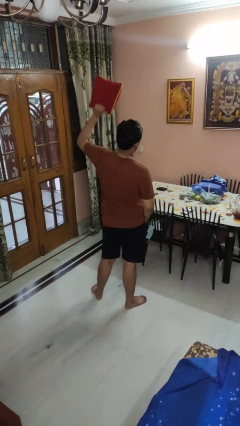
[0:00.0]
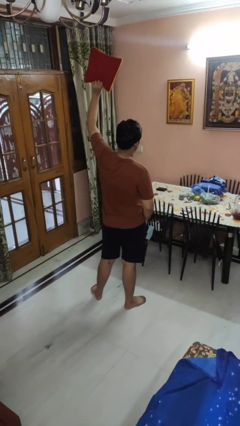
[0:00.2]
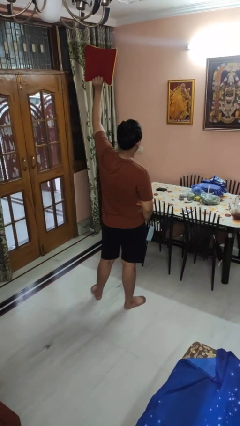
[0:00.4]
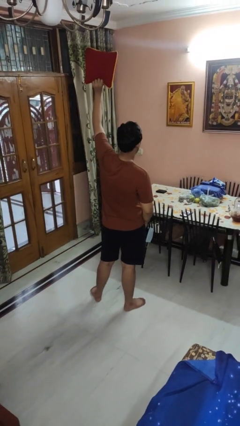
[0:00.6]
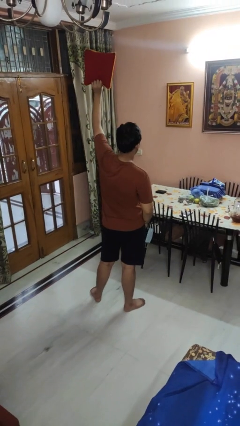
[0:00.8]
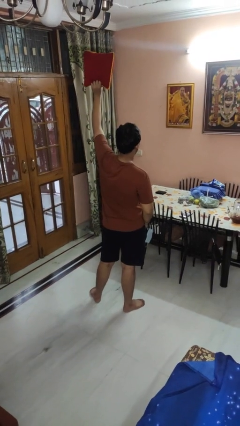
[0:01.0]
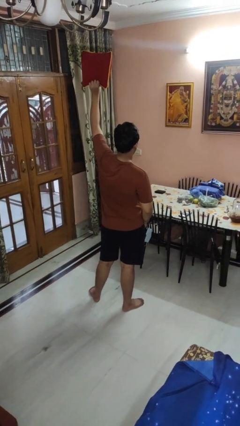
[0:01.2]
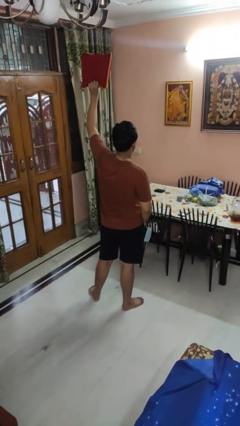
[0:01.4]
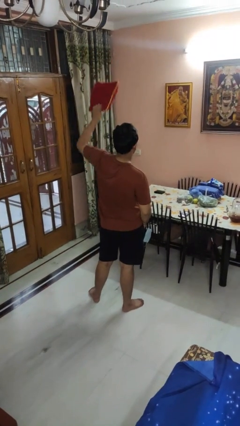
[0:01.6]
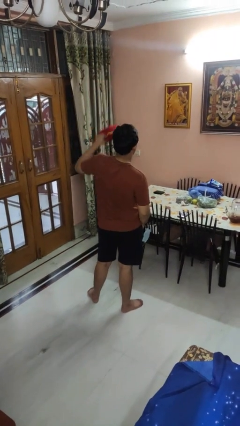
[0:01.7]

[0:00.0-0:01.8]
person holds object above head

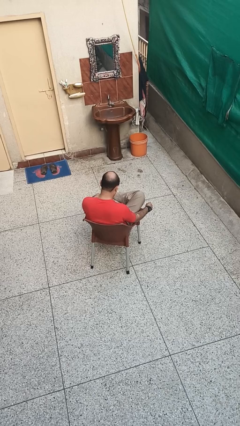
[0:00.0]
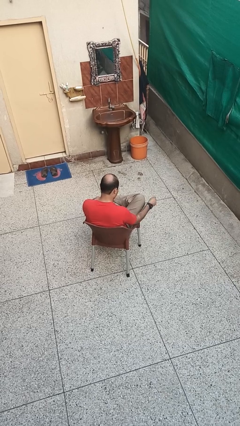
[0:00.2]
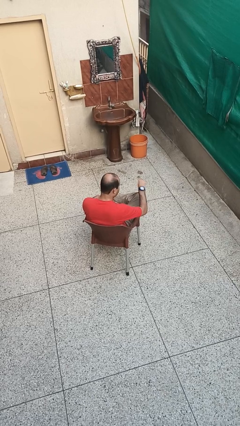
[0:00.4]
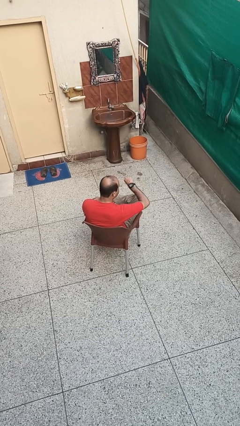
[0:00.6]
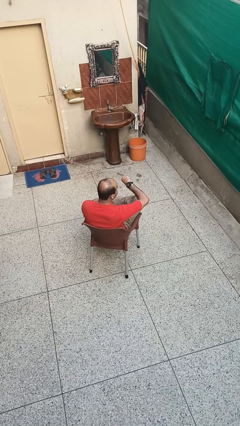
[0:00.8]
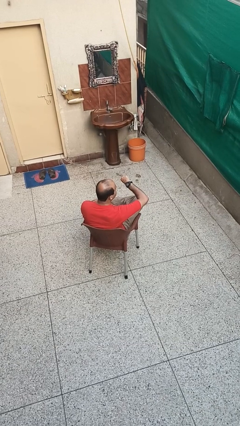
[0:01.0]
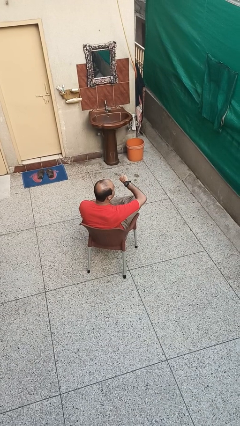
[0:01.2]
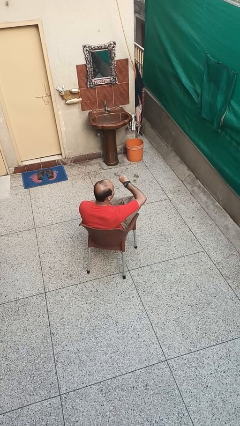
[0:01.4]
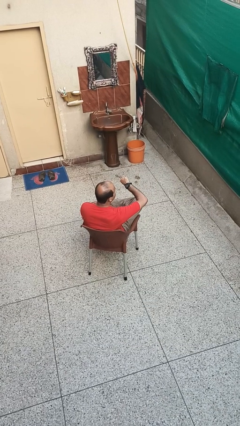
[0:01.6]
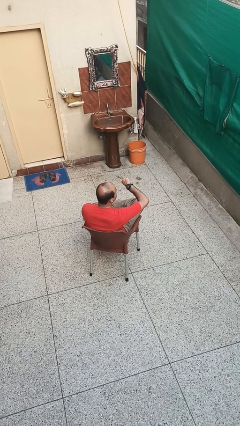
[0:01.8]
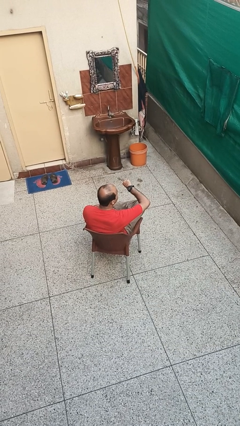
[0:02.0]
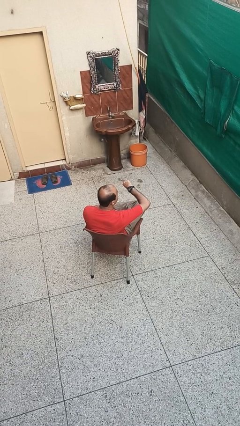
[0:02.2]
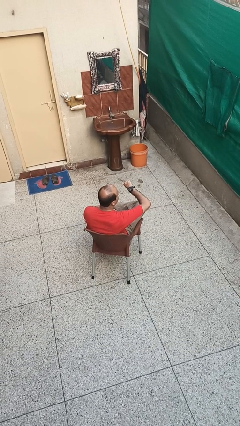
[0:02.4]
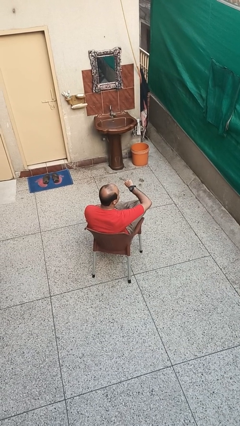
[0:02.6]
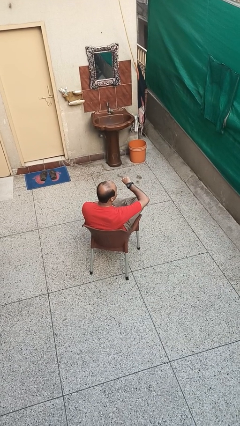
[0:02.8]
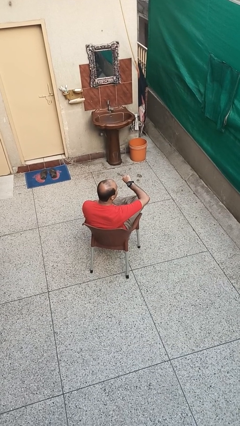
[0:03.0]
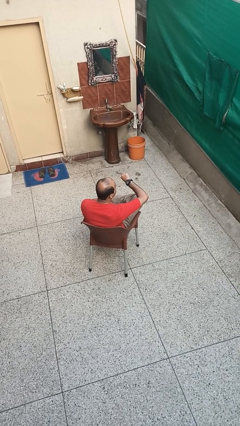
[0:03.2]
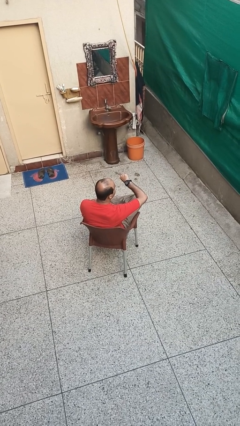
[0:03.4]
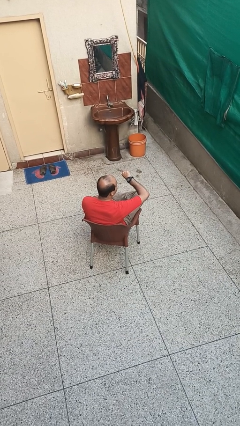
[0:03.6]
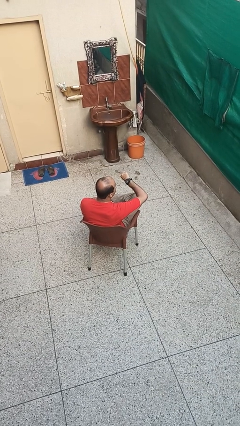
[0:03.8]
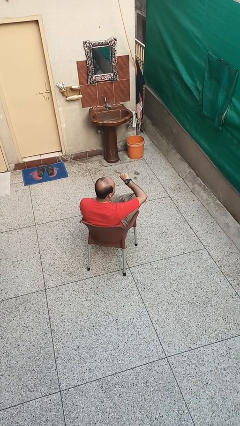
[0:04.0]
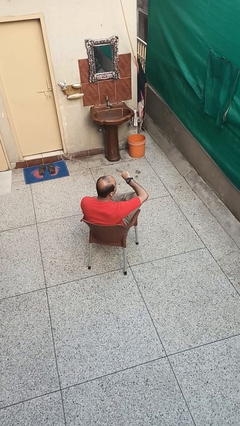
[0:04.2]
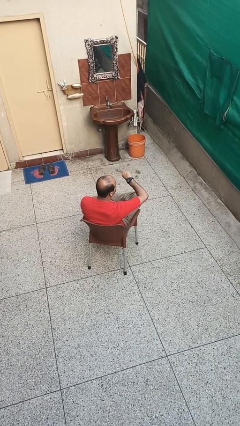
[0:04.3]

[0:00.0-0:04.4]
person looks at wristwatch

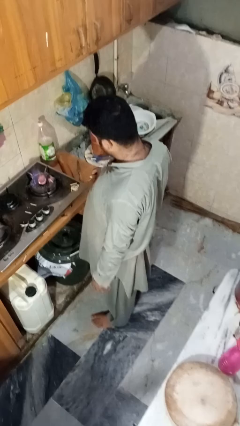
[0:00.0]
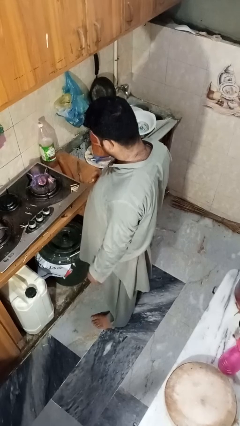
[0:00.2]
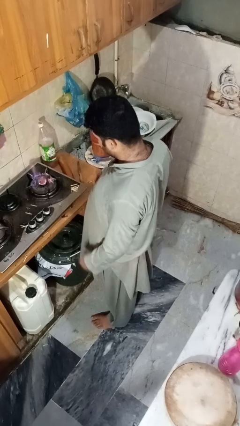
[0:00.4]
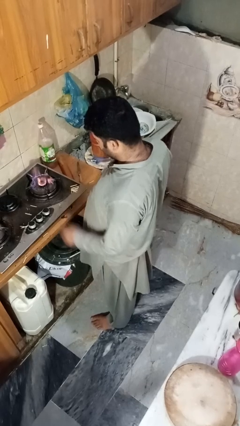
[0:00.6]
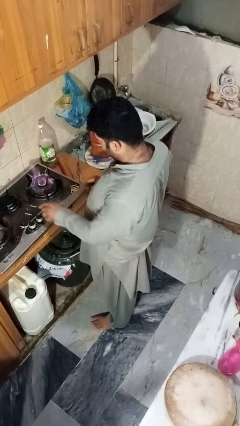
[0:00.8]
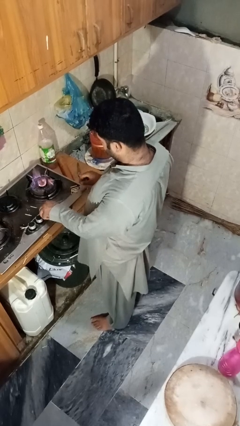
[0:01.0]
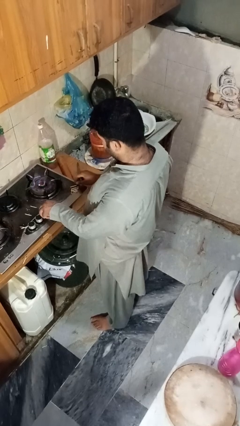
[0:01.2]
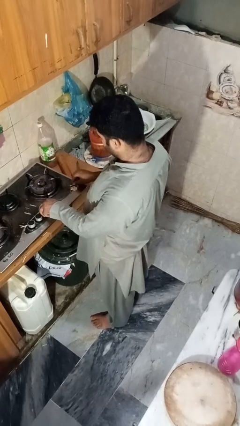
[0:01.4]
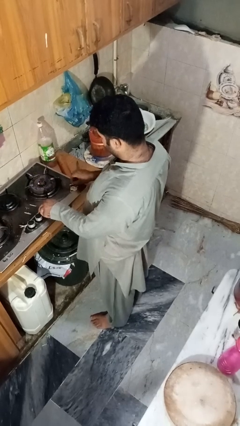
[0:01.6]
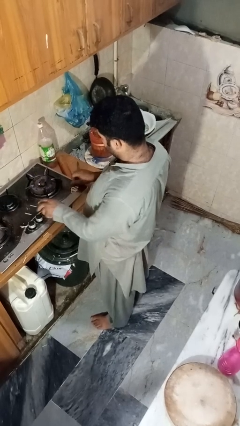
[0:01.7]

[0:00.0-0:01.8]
person turns off stovetop

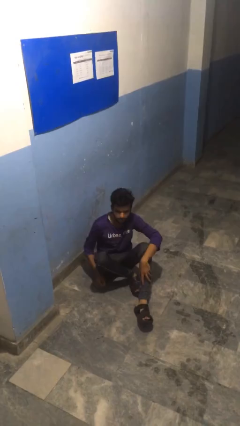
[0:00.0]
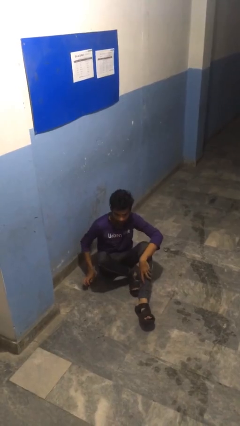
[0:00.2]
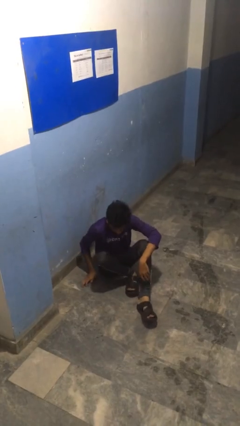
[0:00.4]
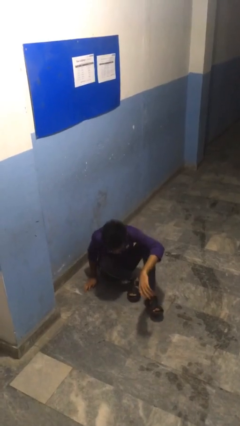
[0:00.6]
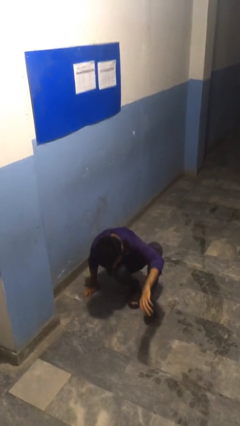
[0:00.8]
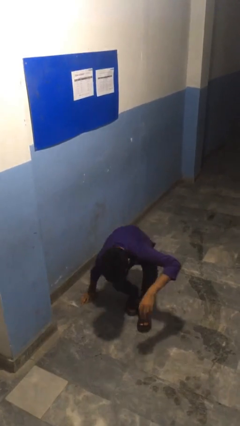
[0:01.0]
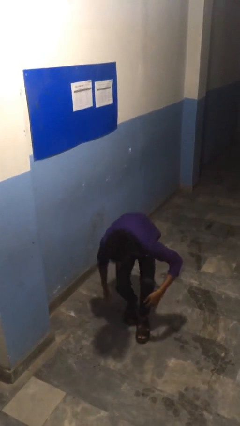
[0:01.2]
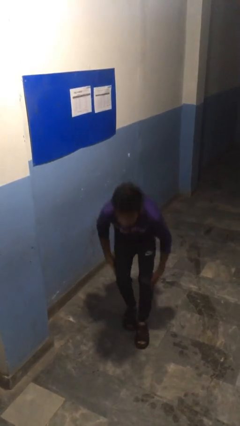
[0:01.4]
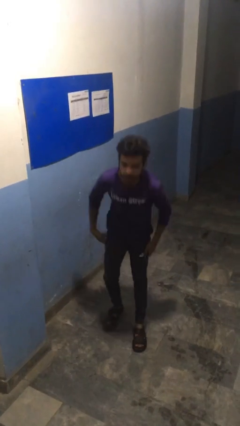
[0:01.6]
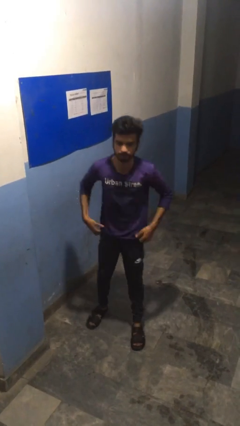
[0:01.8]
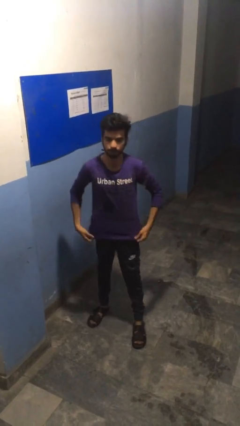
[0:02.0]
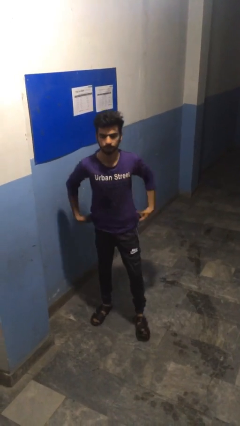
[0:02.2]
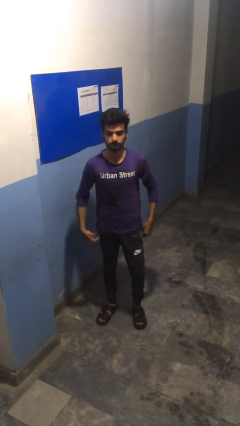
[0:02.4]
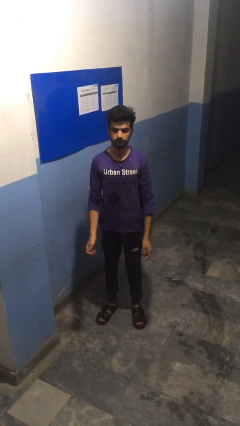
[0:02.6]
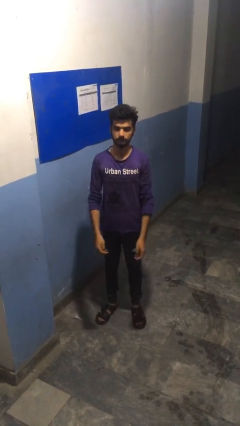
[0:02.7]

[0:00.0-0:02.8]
person stands up from floor

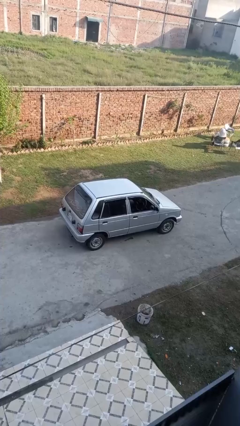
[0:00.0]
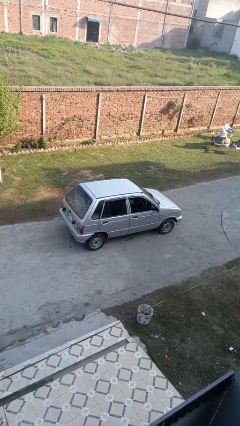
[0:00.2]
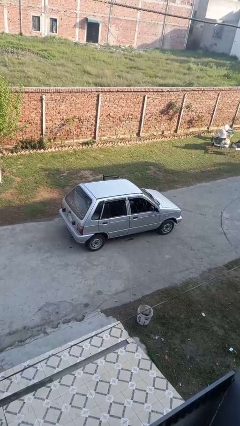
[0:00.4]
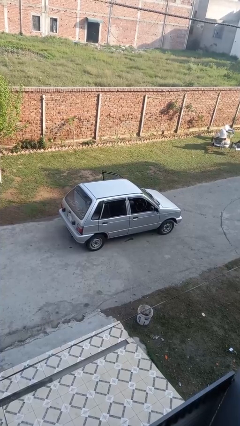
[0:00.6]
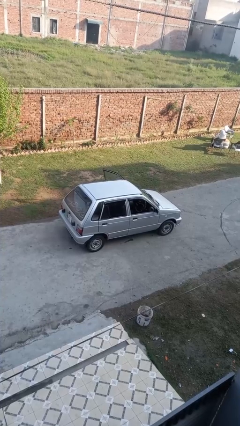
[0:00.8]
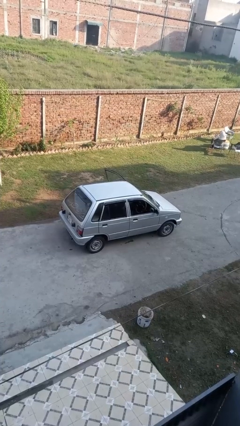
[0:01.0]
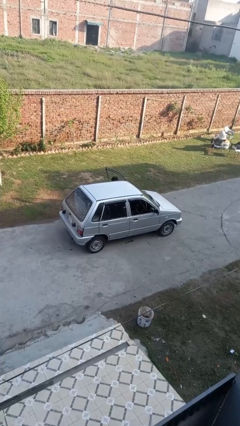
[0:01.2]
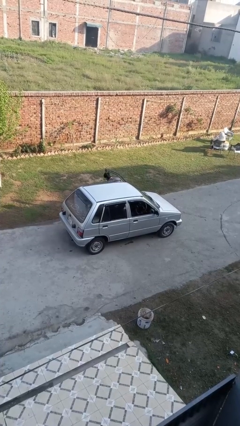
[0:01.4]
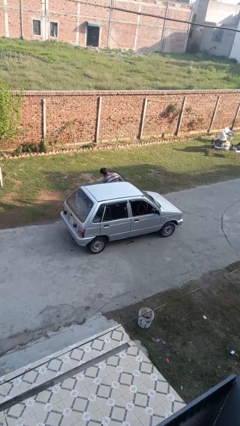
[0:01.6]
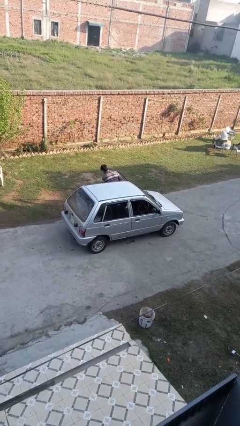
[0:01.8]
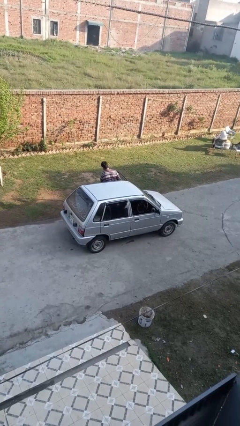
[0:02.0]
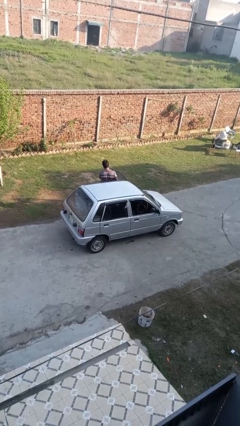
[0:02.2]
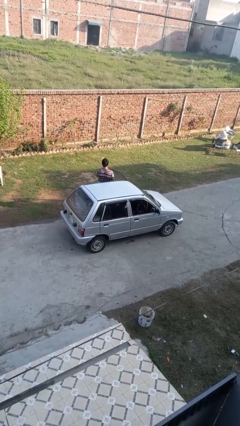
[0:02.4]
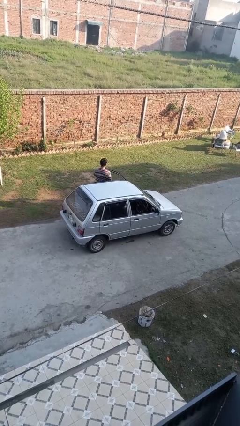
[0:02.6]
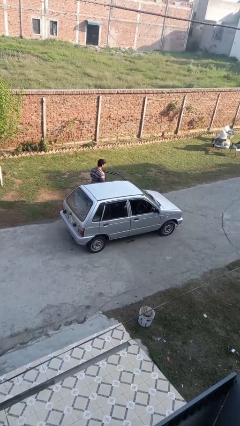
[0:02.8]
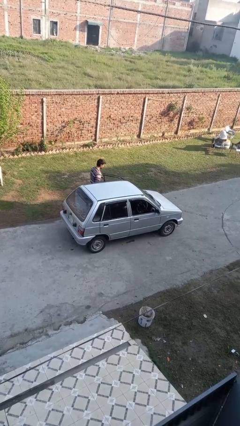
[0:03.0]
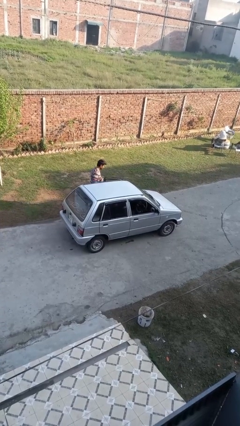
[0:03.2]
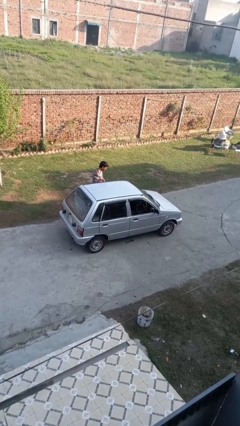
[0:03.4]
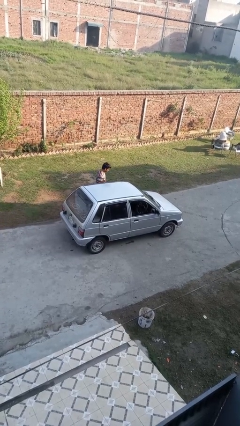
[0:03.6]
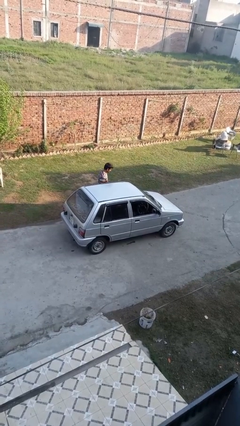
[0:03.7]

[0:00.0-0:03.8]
car drops off person

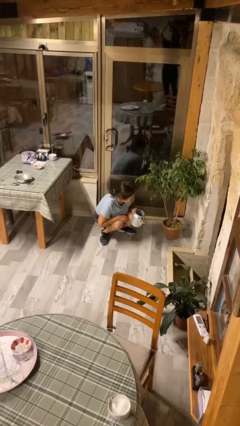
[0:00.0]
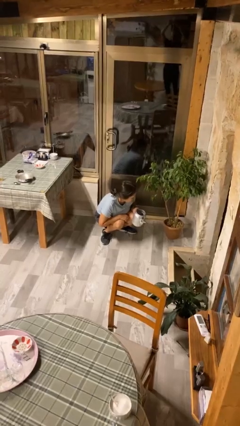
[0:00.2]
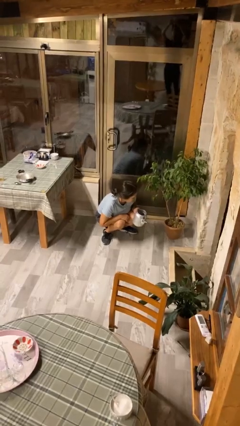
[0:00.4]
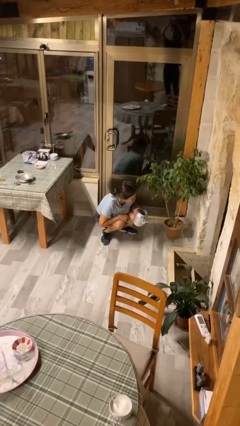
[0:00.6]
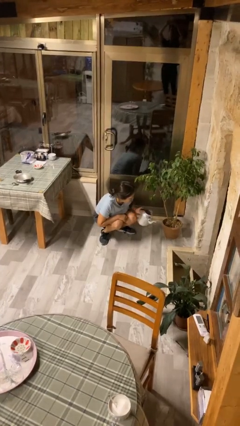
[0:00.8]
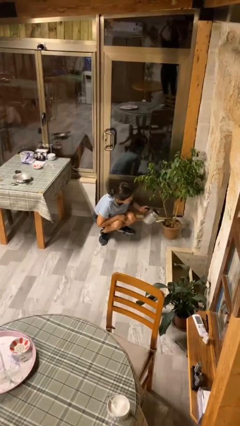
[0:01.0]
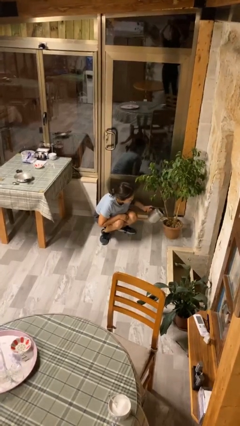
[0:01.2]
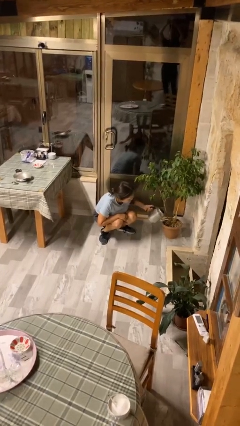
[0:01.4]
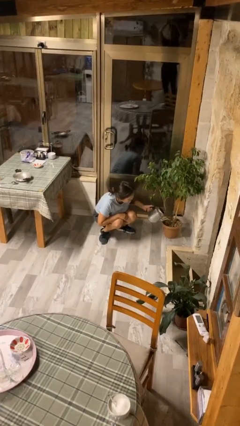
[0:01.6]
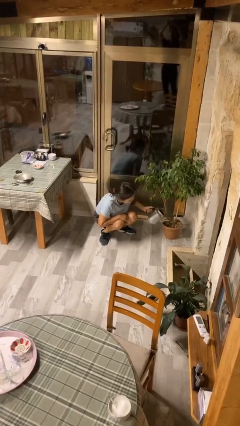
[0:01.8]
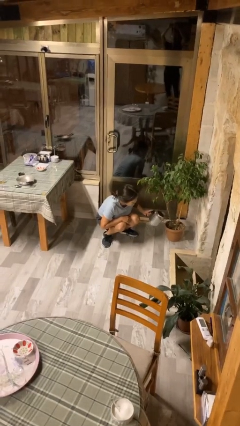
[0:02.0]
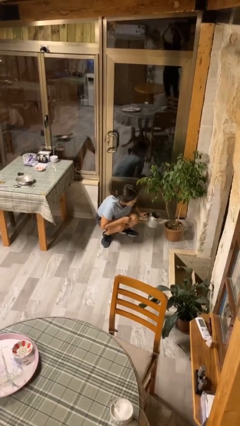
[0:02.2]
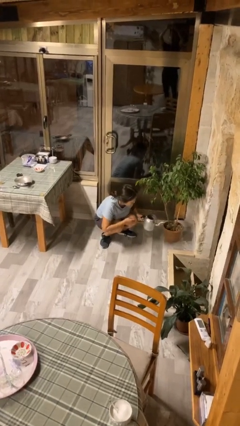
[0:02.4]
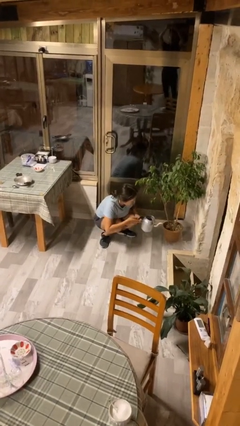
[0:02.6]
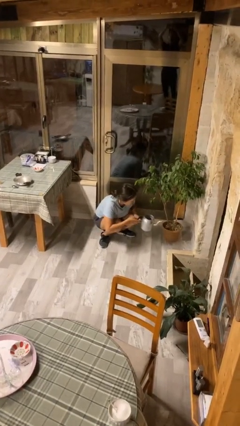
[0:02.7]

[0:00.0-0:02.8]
person waters houseplant
